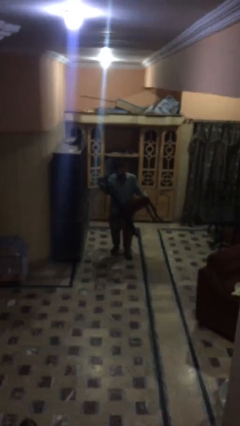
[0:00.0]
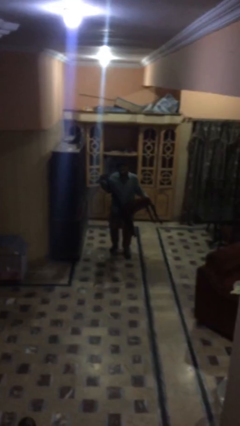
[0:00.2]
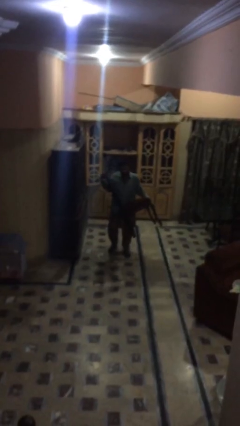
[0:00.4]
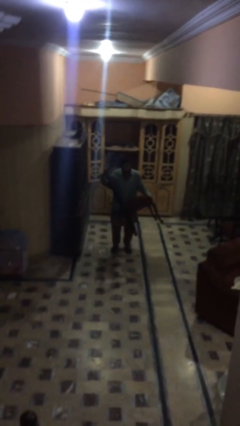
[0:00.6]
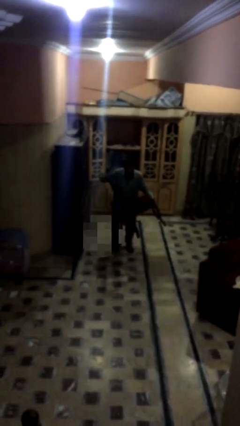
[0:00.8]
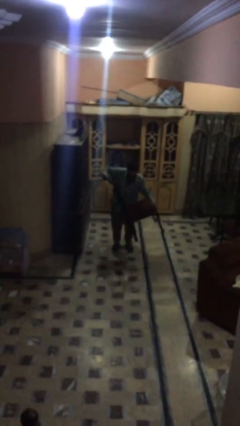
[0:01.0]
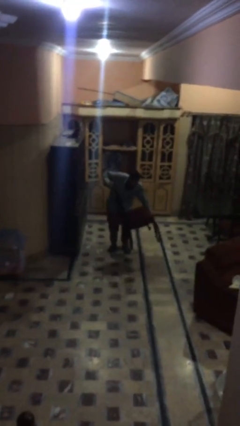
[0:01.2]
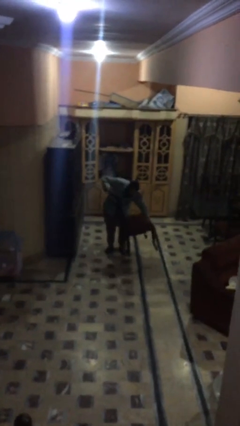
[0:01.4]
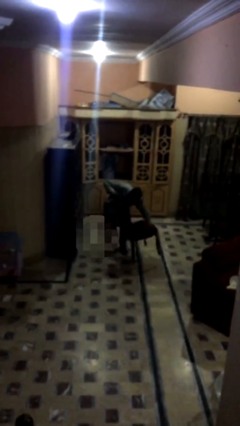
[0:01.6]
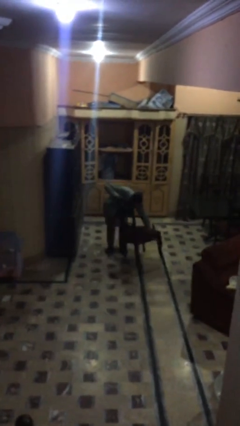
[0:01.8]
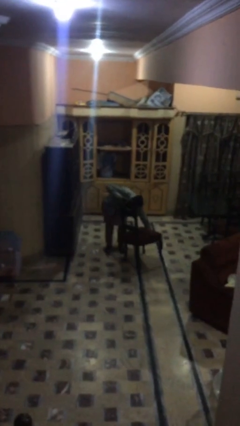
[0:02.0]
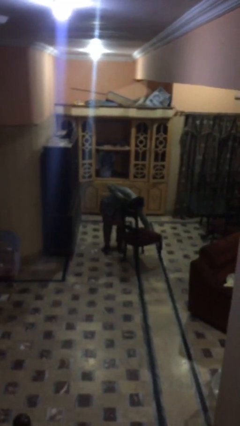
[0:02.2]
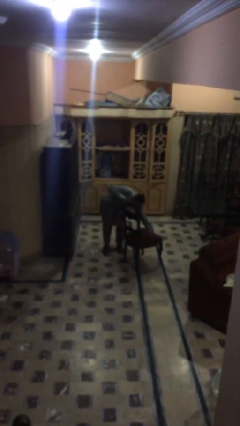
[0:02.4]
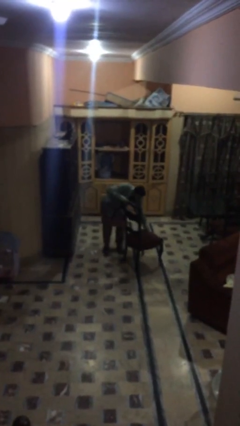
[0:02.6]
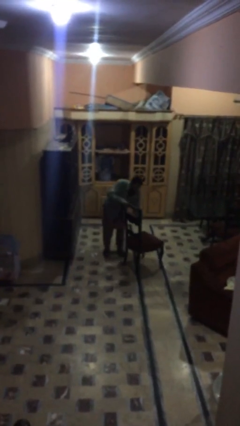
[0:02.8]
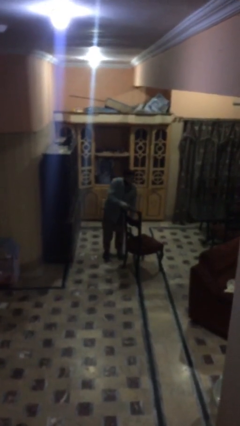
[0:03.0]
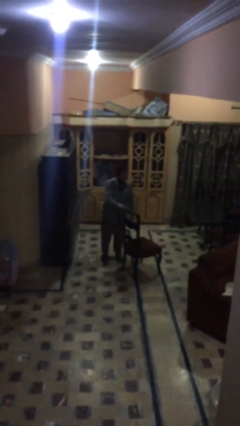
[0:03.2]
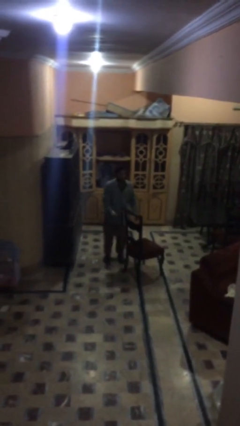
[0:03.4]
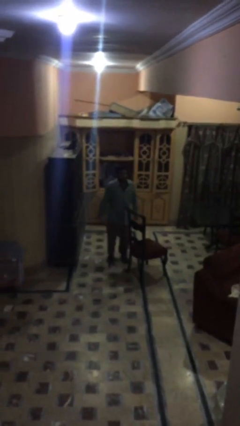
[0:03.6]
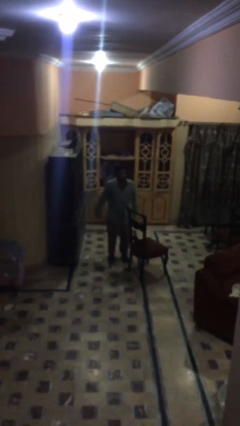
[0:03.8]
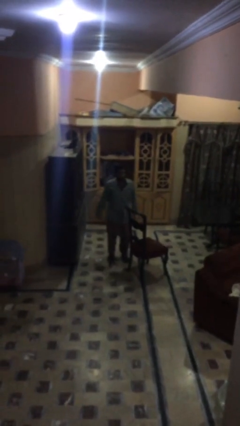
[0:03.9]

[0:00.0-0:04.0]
person puts down object on floor

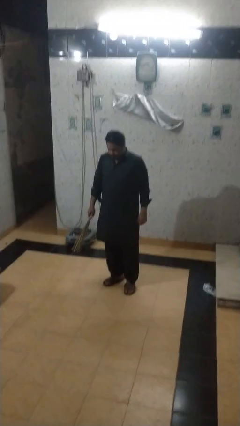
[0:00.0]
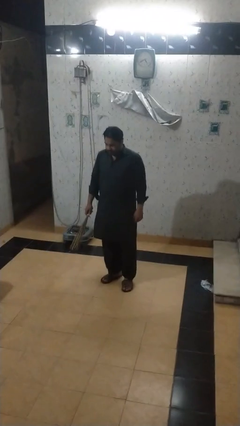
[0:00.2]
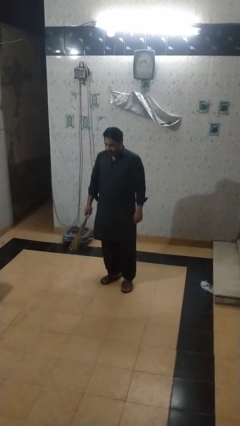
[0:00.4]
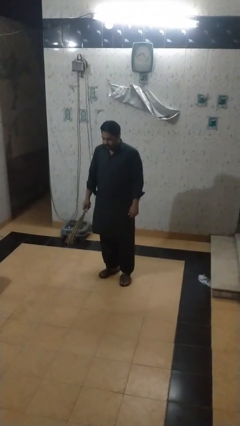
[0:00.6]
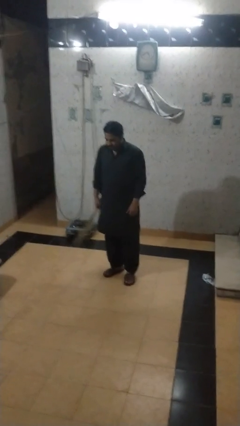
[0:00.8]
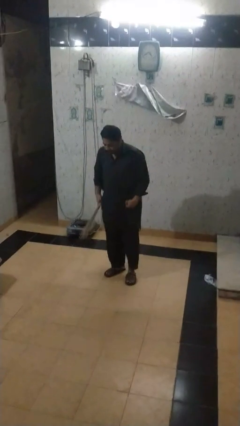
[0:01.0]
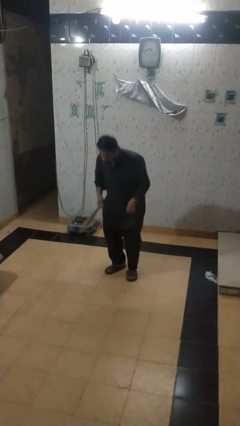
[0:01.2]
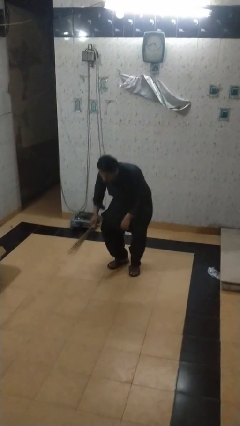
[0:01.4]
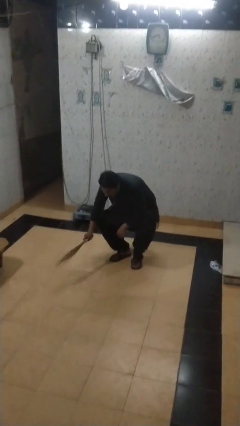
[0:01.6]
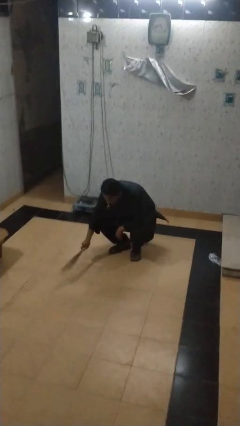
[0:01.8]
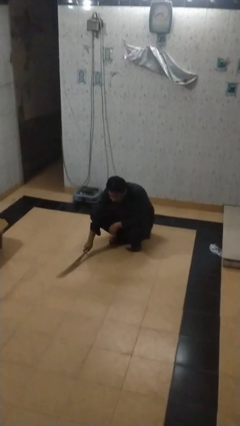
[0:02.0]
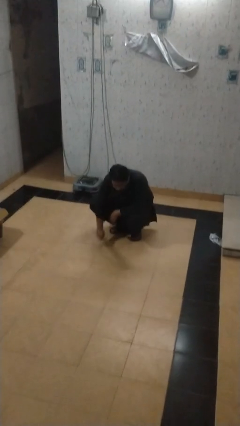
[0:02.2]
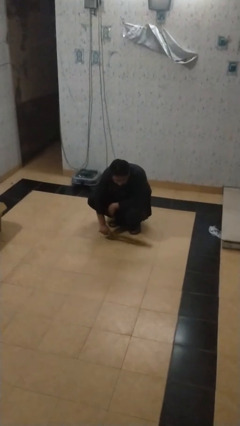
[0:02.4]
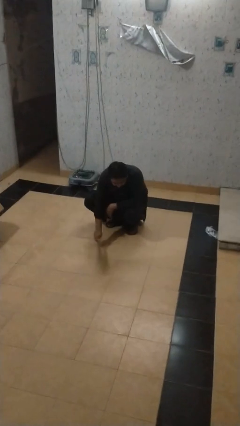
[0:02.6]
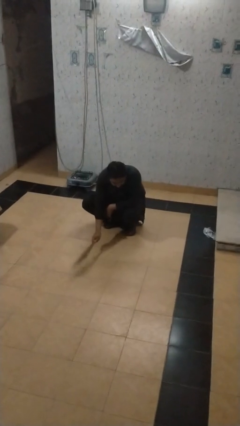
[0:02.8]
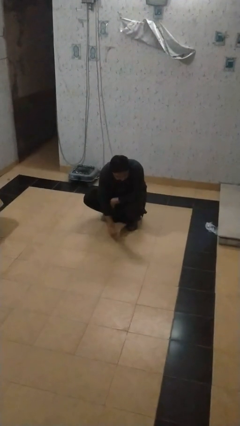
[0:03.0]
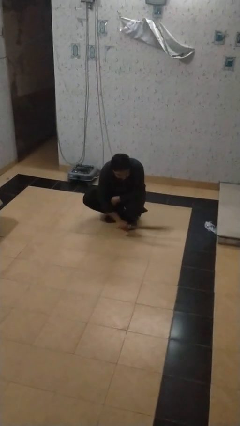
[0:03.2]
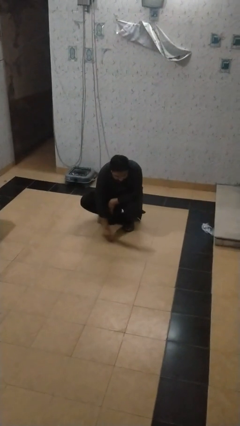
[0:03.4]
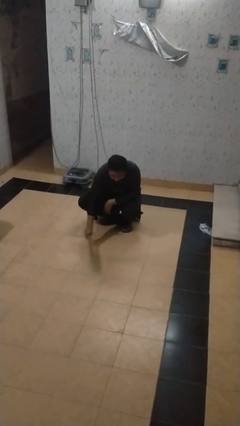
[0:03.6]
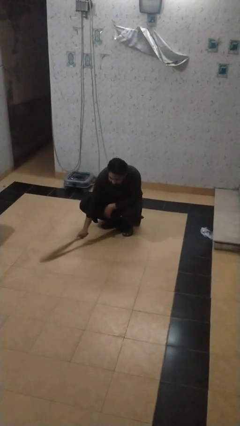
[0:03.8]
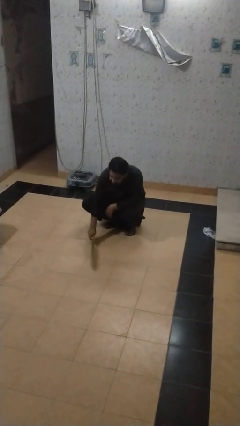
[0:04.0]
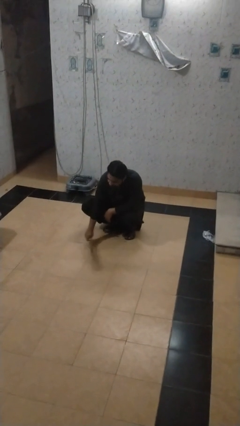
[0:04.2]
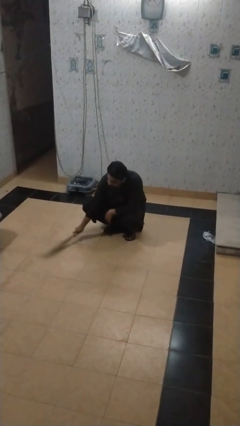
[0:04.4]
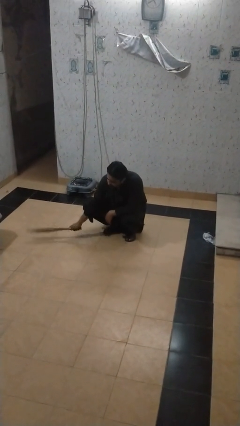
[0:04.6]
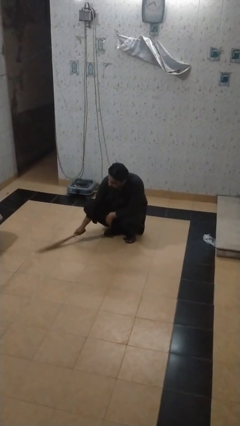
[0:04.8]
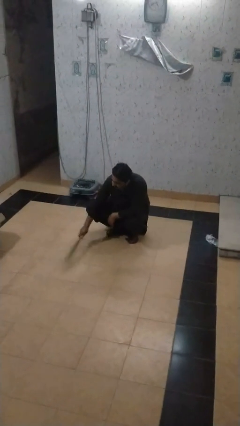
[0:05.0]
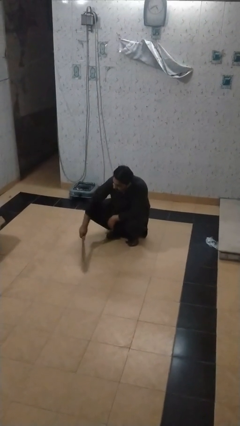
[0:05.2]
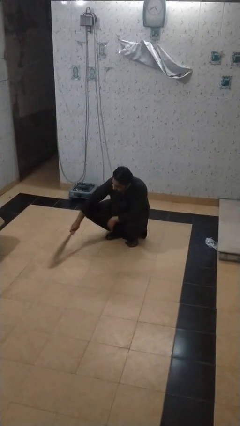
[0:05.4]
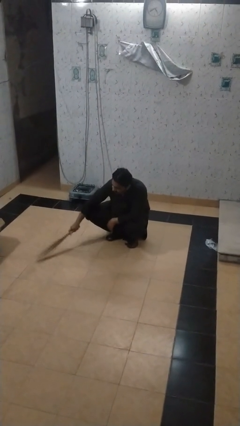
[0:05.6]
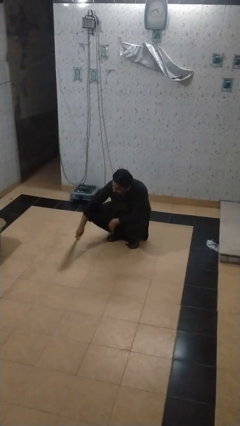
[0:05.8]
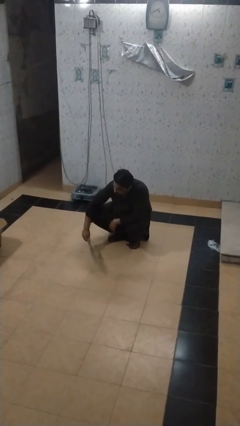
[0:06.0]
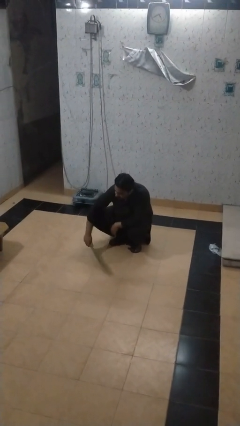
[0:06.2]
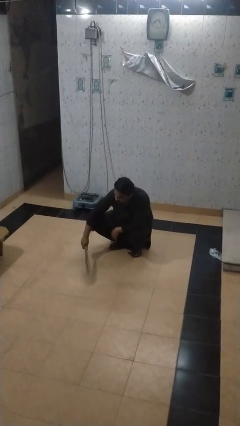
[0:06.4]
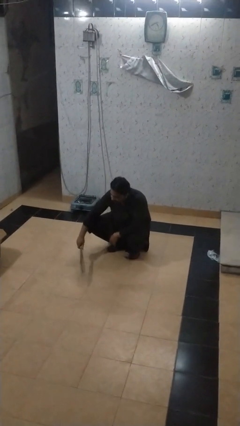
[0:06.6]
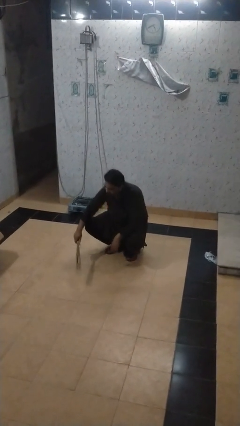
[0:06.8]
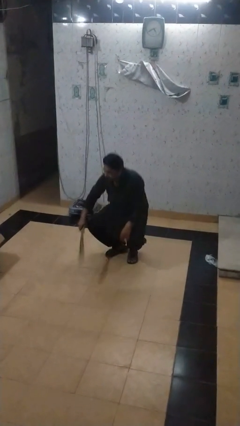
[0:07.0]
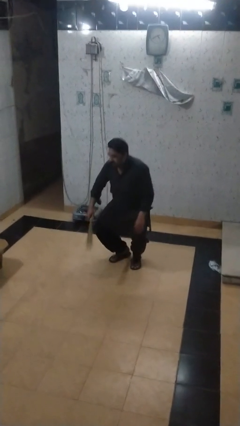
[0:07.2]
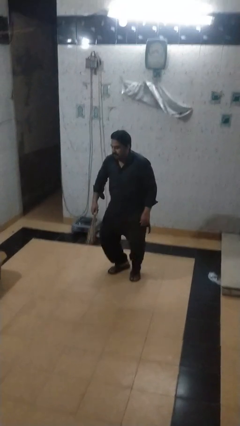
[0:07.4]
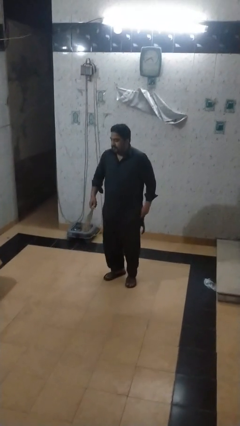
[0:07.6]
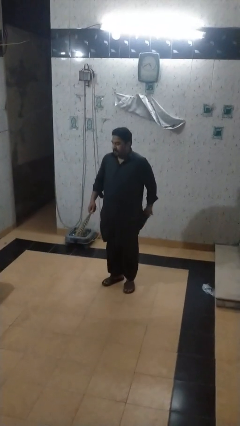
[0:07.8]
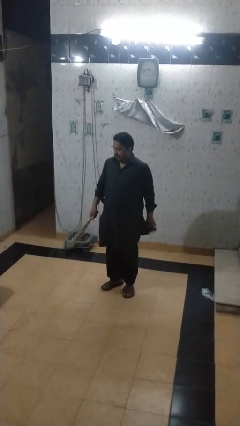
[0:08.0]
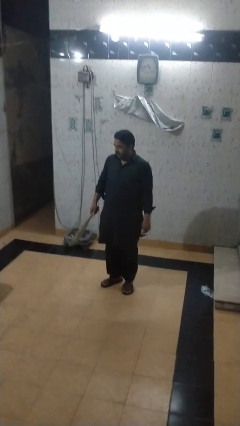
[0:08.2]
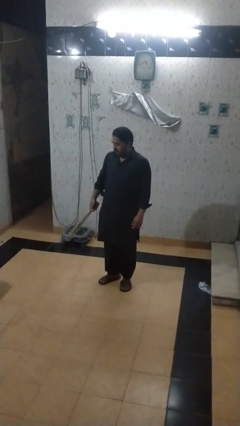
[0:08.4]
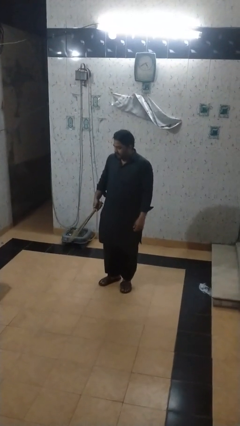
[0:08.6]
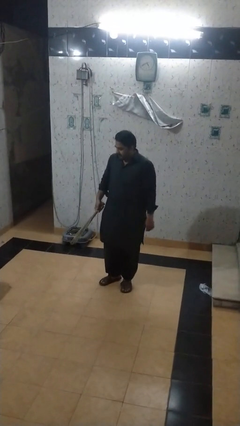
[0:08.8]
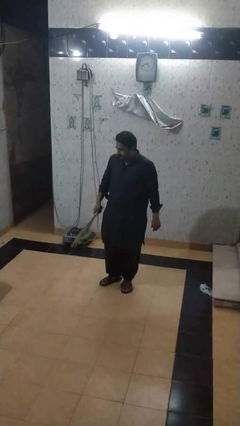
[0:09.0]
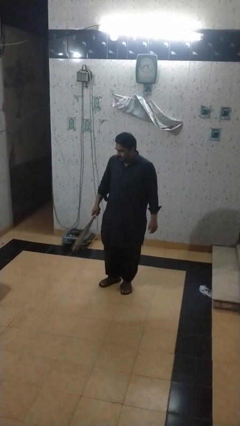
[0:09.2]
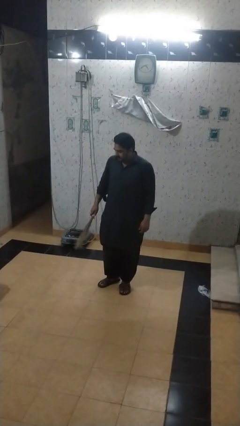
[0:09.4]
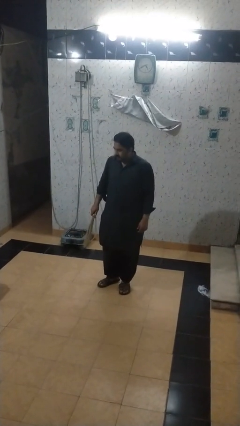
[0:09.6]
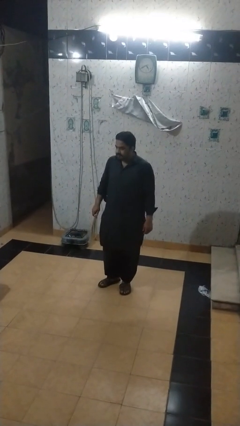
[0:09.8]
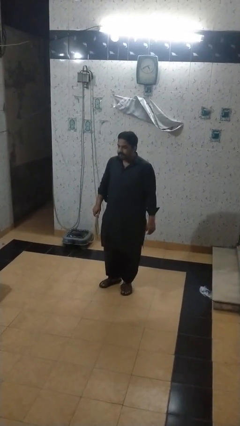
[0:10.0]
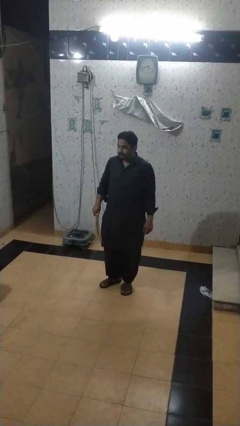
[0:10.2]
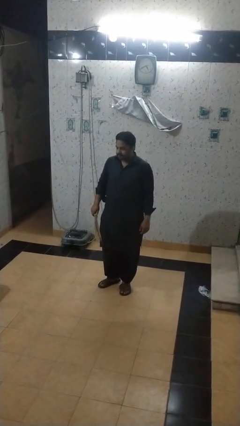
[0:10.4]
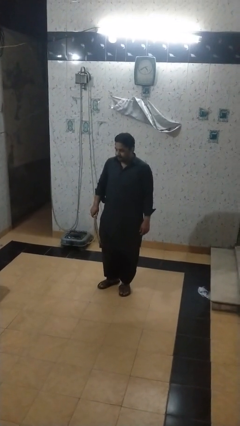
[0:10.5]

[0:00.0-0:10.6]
person sweeps floor

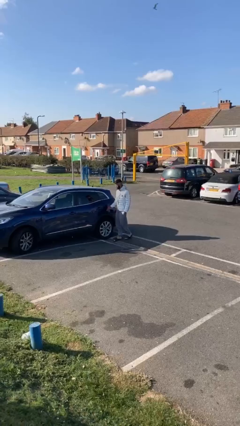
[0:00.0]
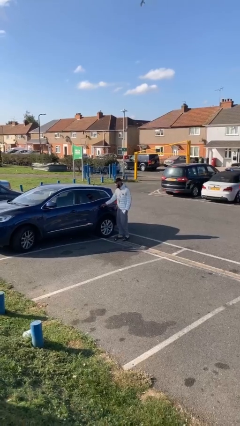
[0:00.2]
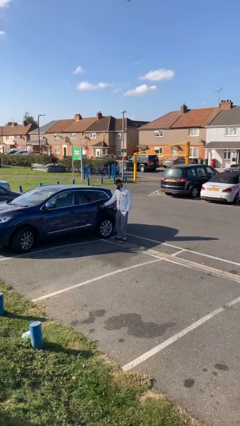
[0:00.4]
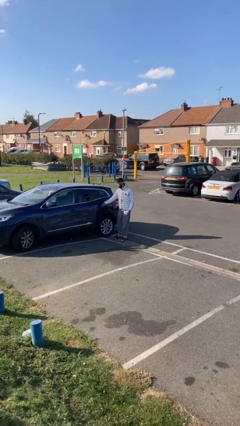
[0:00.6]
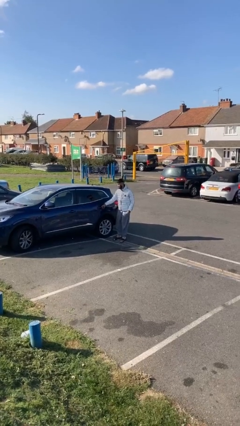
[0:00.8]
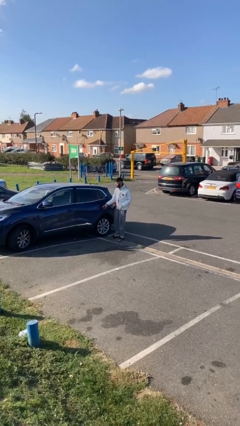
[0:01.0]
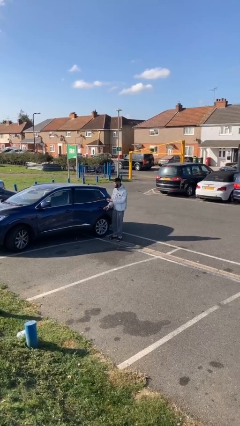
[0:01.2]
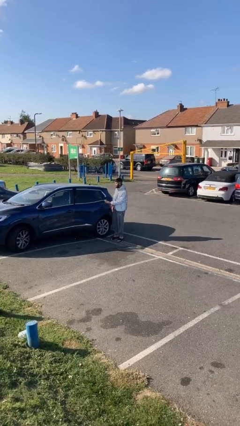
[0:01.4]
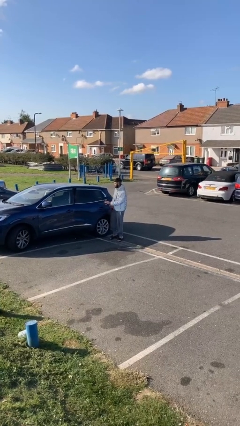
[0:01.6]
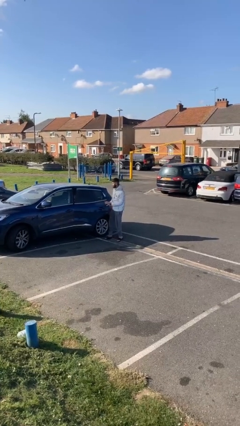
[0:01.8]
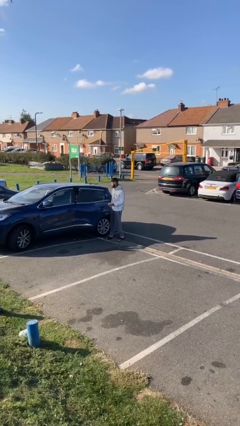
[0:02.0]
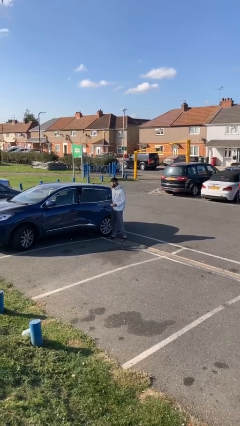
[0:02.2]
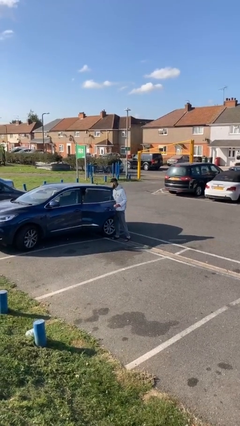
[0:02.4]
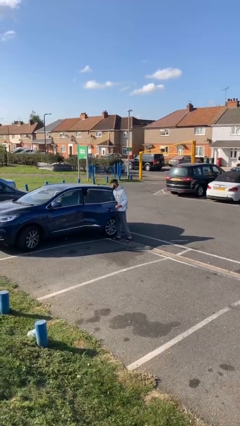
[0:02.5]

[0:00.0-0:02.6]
person opens car door

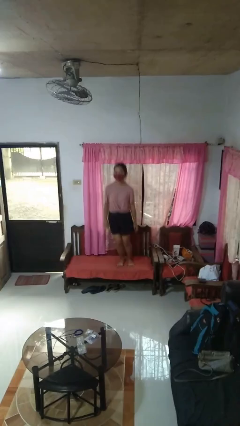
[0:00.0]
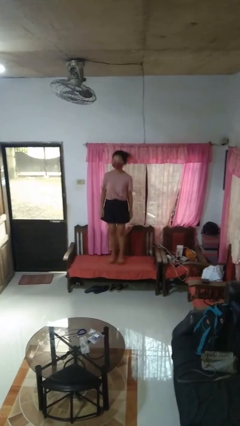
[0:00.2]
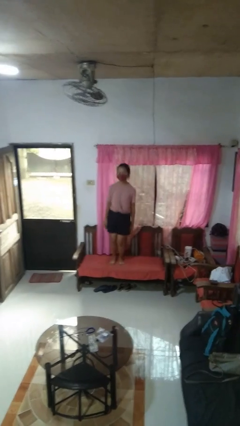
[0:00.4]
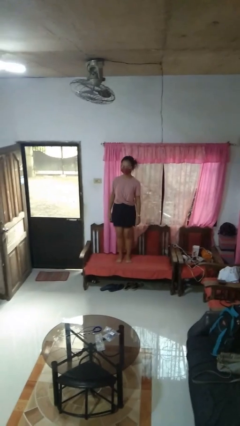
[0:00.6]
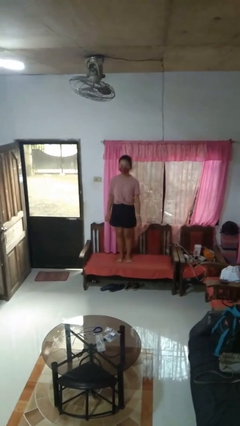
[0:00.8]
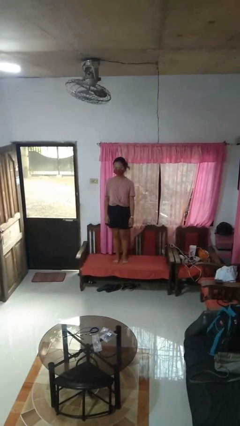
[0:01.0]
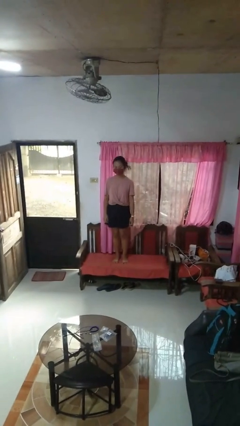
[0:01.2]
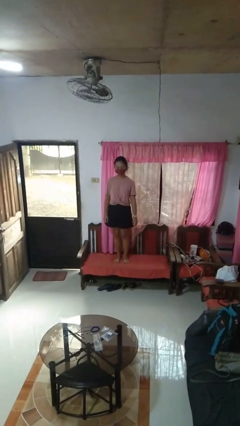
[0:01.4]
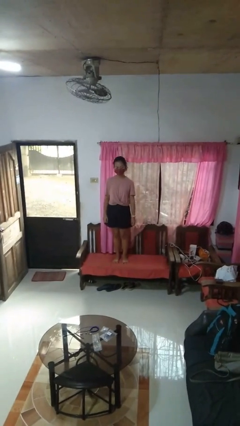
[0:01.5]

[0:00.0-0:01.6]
person jumps on couch
